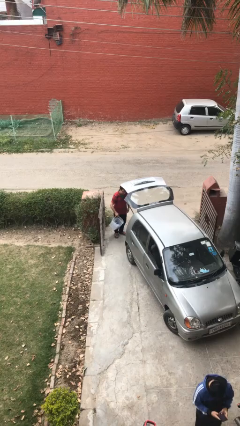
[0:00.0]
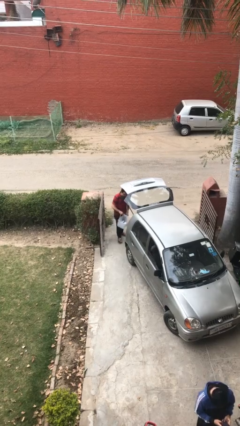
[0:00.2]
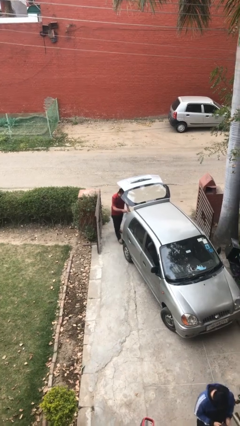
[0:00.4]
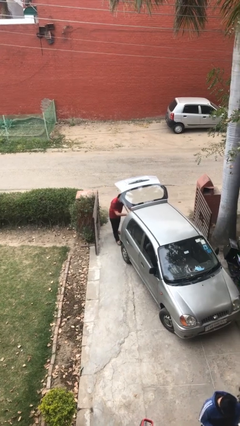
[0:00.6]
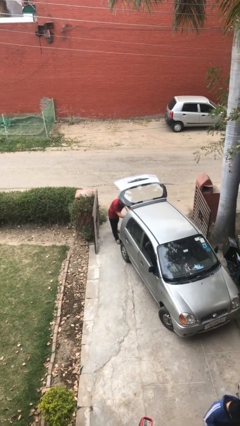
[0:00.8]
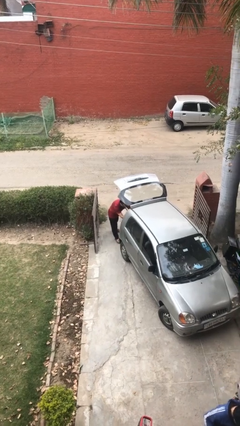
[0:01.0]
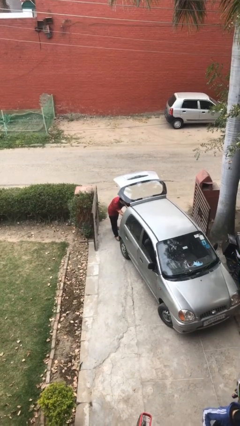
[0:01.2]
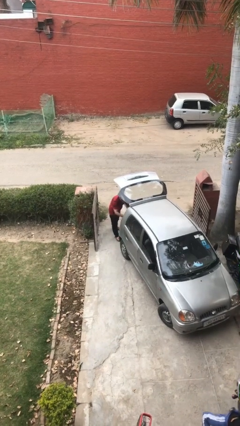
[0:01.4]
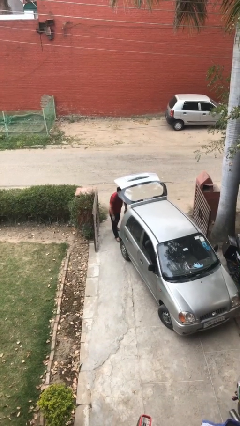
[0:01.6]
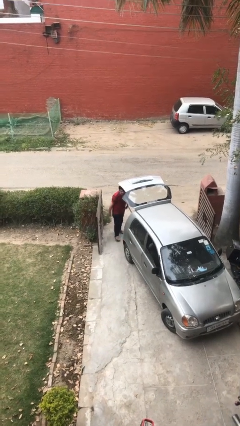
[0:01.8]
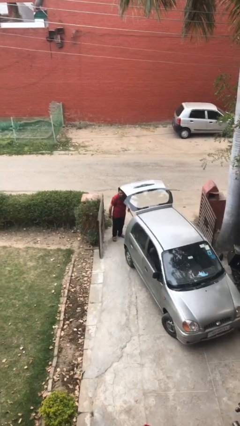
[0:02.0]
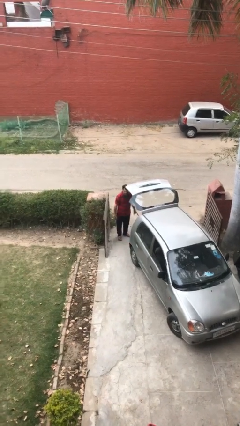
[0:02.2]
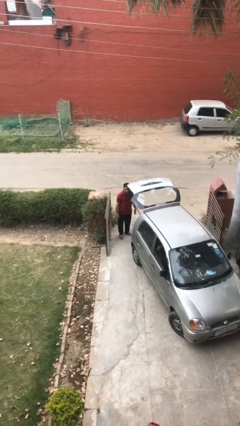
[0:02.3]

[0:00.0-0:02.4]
person loads car

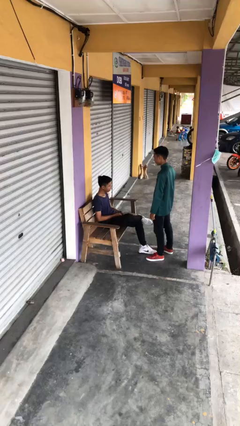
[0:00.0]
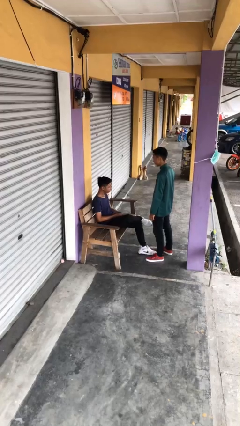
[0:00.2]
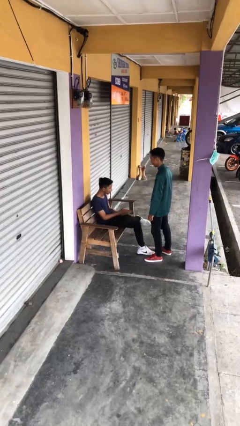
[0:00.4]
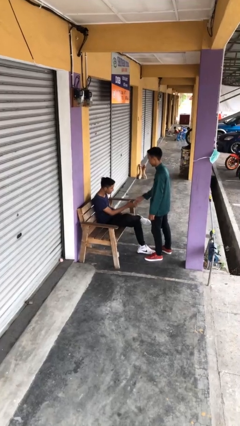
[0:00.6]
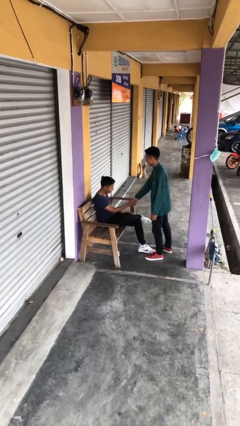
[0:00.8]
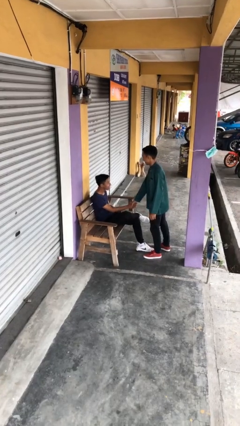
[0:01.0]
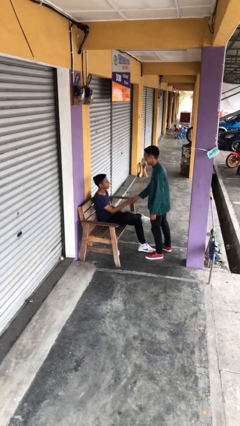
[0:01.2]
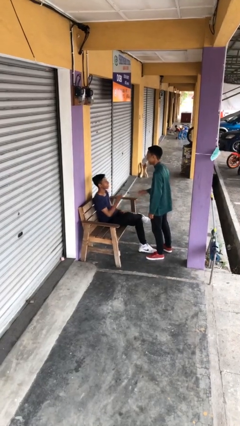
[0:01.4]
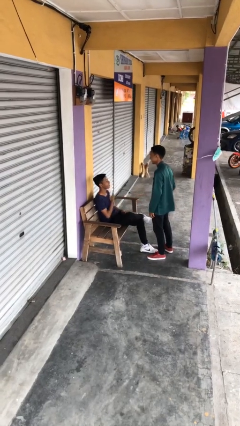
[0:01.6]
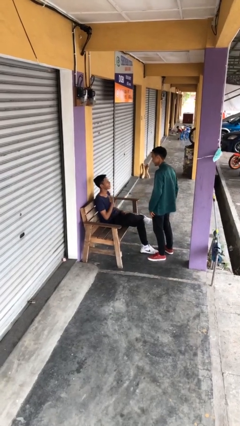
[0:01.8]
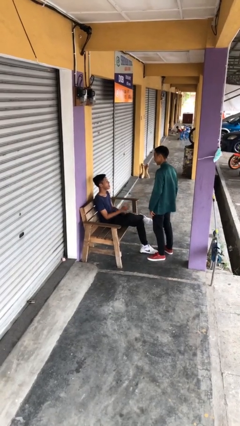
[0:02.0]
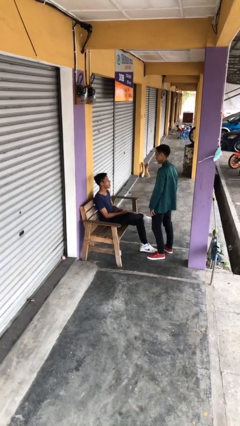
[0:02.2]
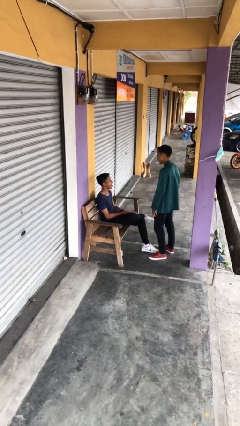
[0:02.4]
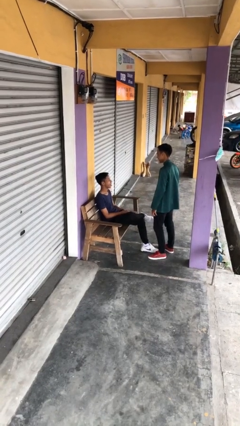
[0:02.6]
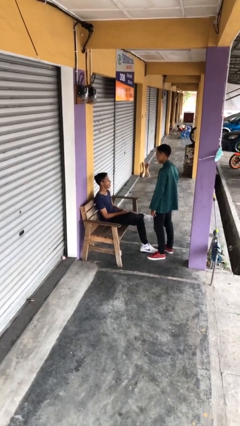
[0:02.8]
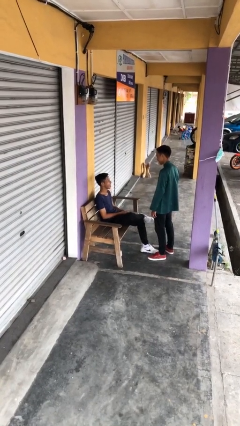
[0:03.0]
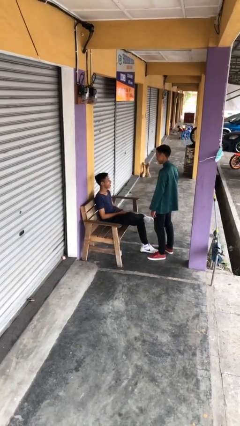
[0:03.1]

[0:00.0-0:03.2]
person shakes hand

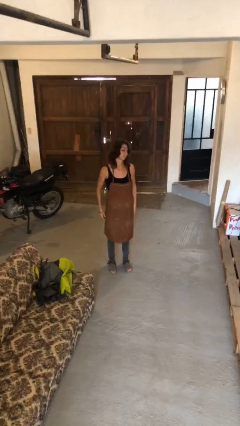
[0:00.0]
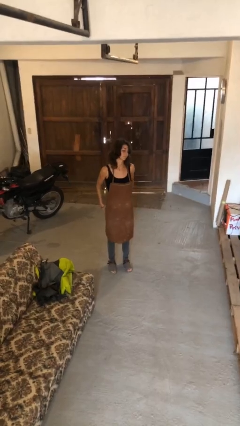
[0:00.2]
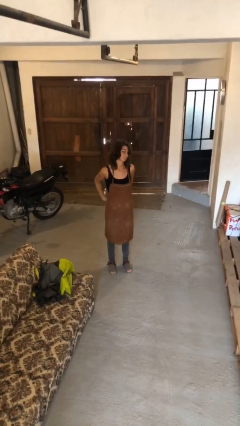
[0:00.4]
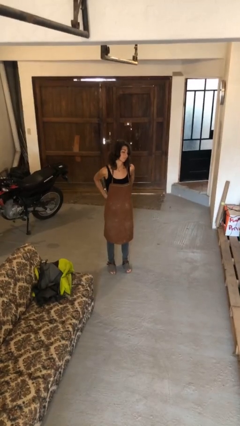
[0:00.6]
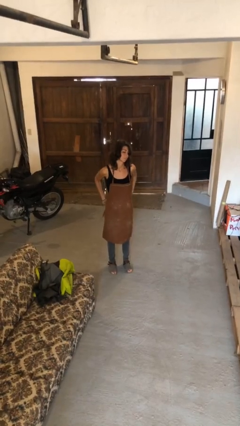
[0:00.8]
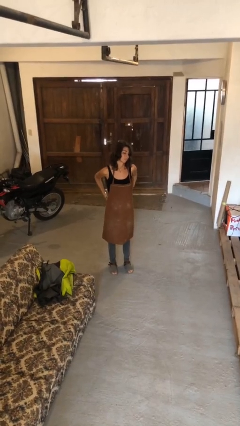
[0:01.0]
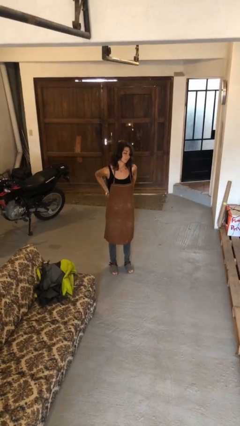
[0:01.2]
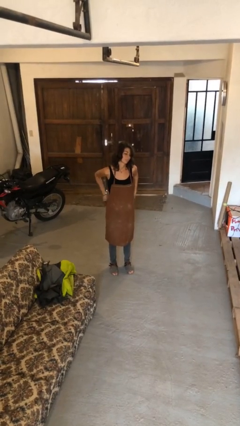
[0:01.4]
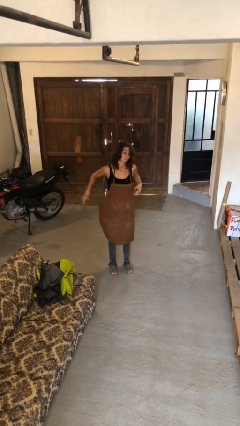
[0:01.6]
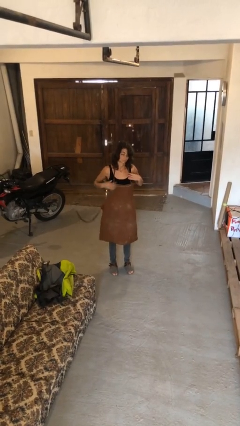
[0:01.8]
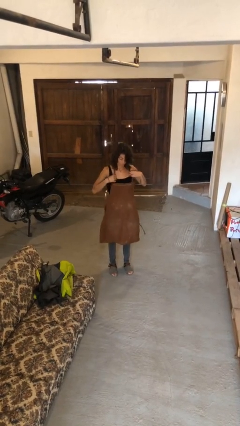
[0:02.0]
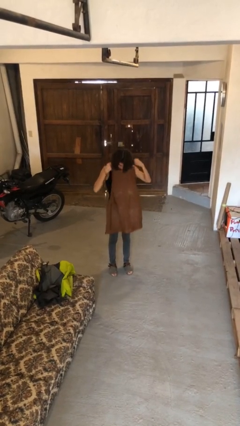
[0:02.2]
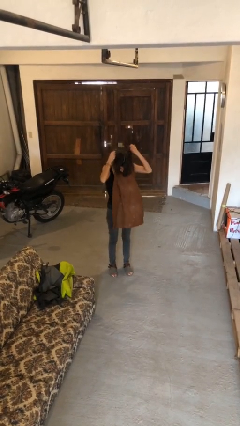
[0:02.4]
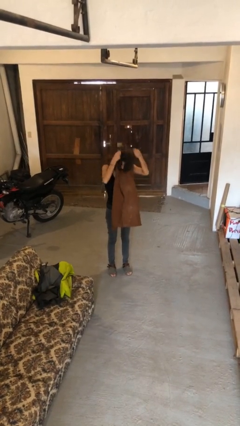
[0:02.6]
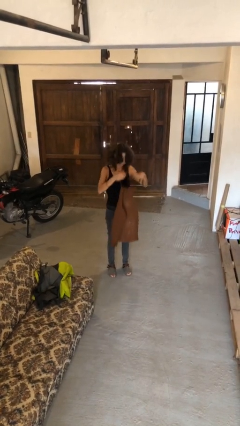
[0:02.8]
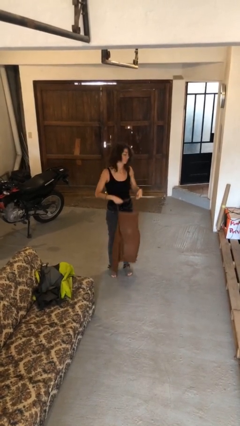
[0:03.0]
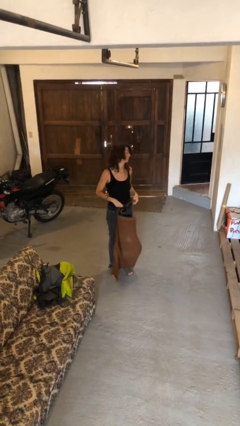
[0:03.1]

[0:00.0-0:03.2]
person takes off apron

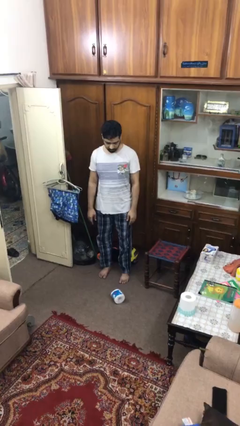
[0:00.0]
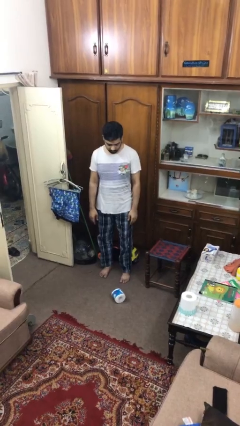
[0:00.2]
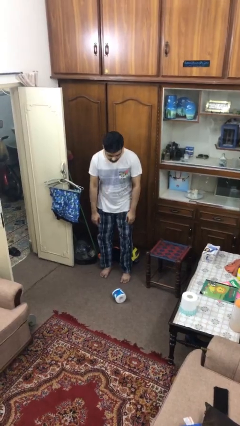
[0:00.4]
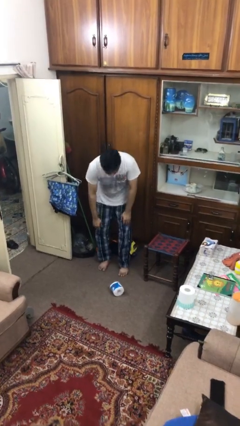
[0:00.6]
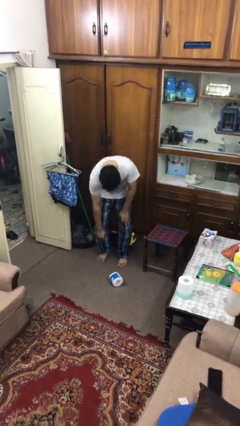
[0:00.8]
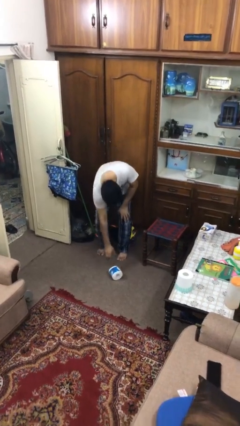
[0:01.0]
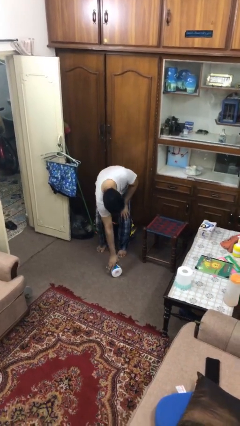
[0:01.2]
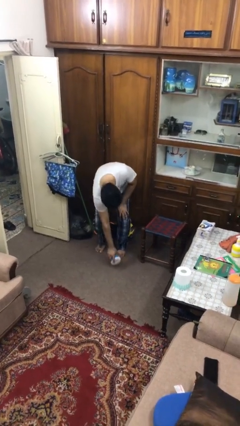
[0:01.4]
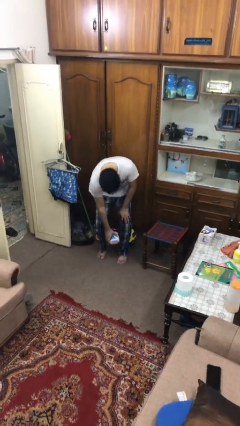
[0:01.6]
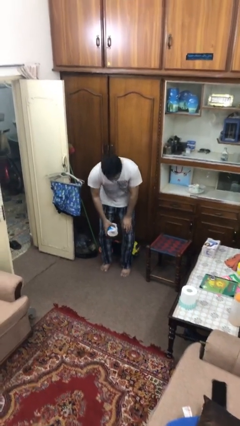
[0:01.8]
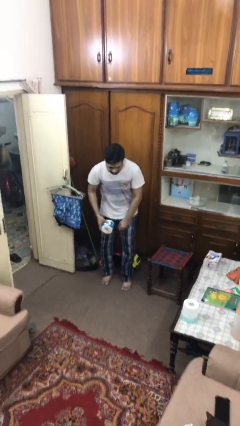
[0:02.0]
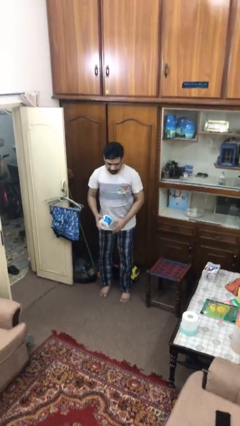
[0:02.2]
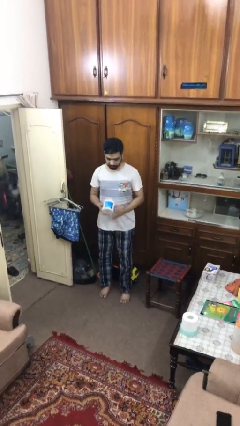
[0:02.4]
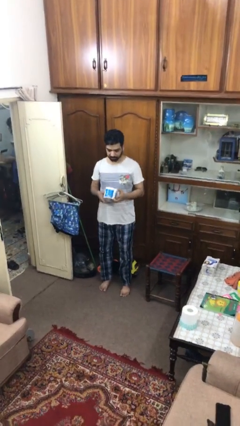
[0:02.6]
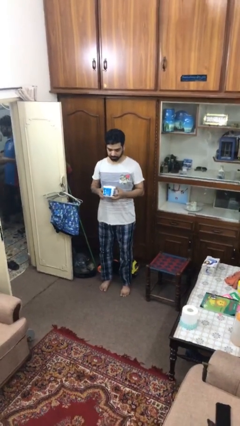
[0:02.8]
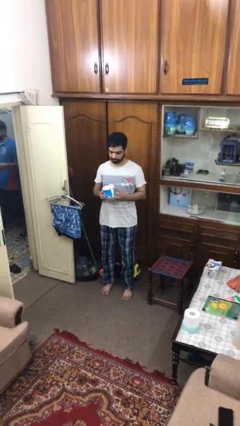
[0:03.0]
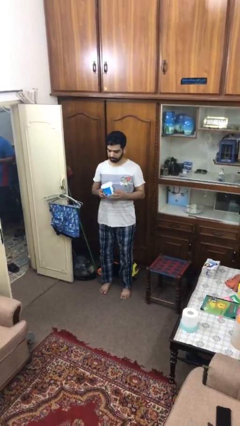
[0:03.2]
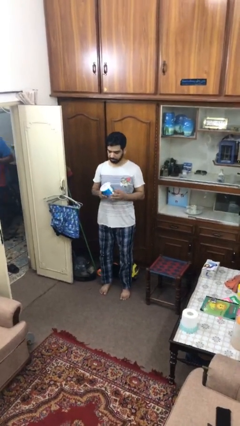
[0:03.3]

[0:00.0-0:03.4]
person picks up object from floor

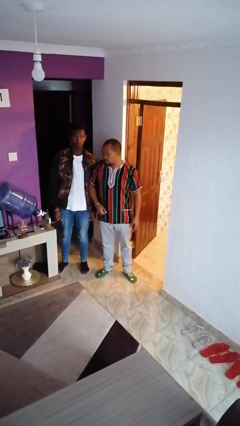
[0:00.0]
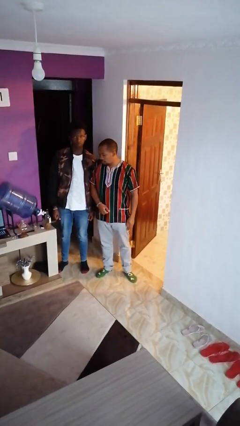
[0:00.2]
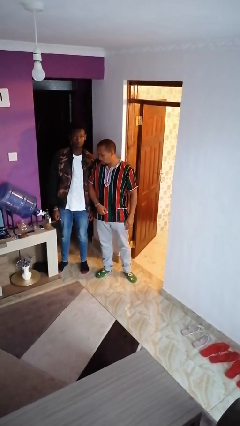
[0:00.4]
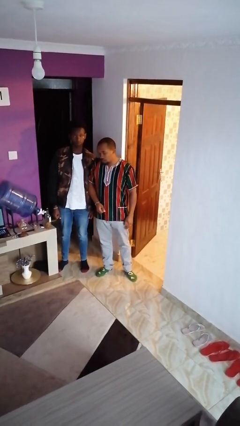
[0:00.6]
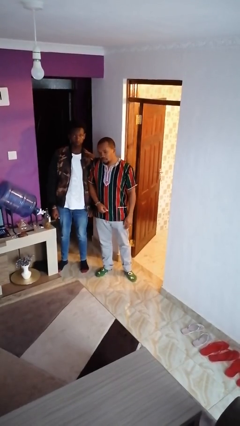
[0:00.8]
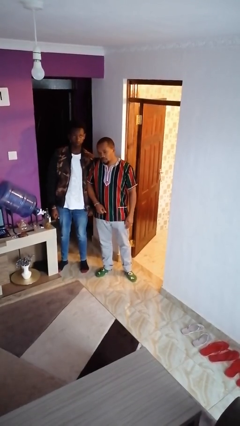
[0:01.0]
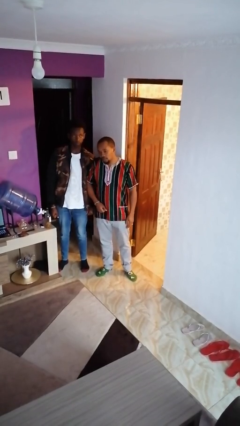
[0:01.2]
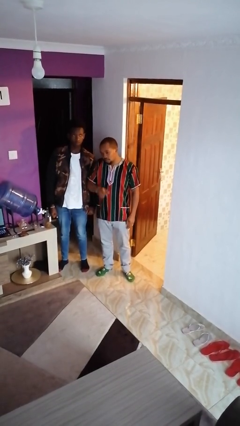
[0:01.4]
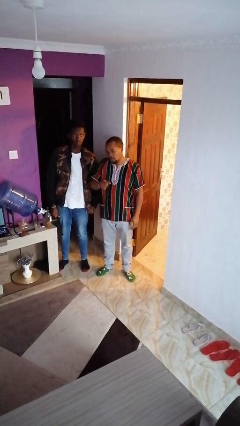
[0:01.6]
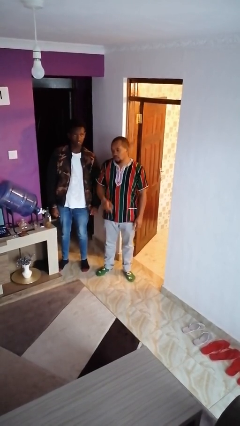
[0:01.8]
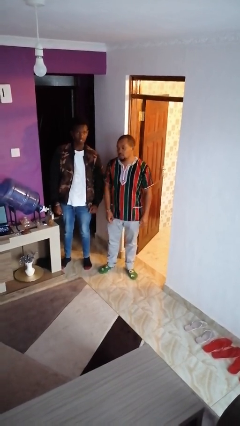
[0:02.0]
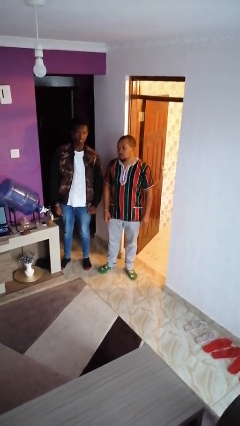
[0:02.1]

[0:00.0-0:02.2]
person nudges person with elbow

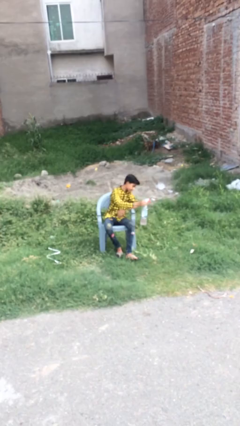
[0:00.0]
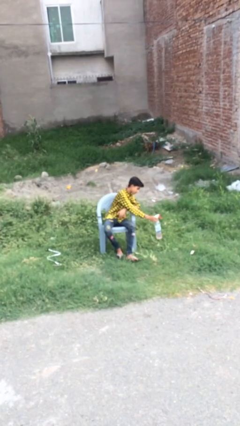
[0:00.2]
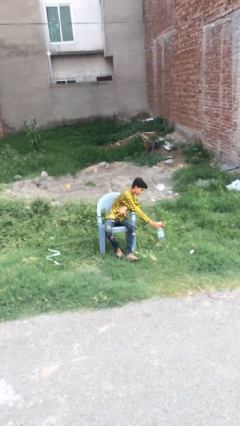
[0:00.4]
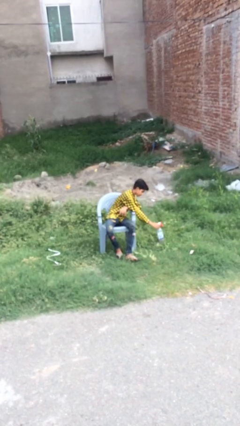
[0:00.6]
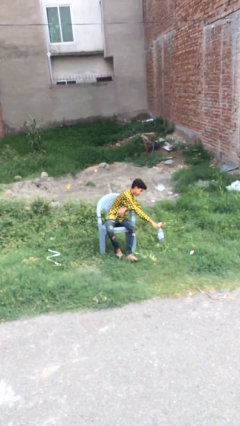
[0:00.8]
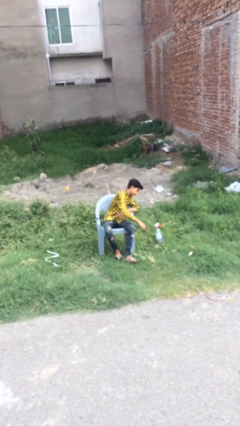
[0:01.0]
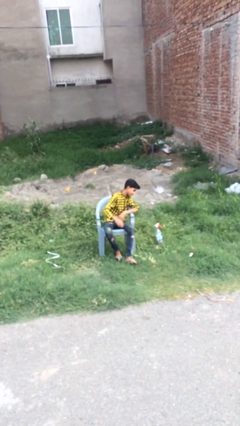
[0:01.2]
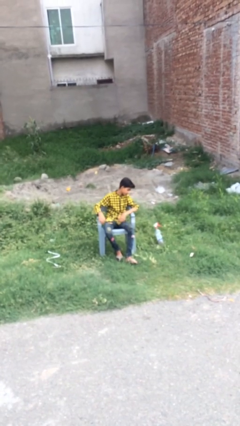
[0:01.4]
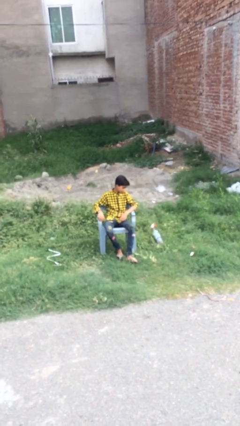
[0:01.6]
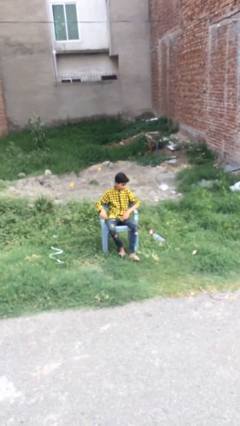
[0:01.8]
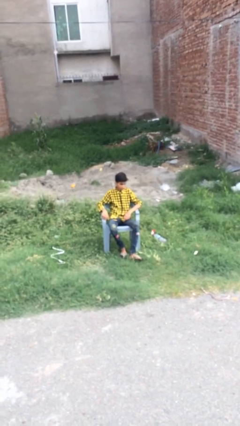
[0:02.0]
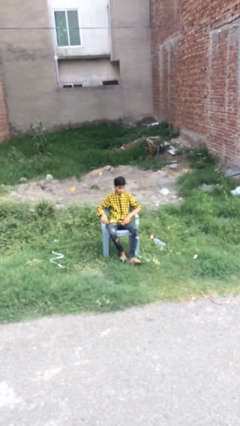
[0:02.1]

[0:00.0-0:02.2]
person puts down object on floor

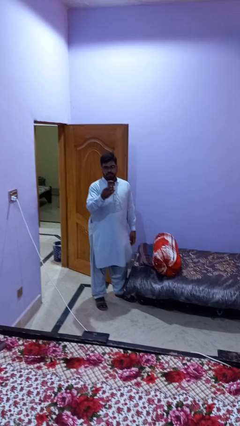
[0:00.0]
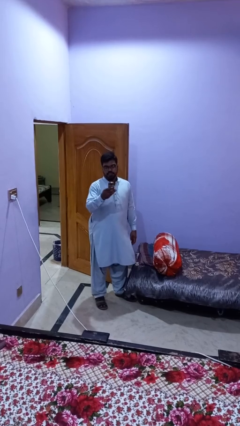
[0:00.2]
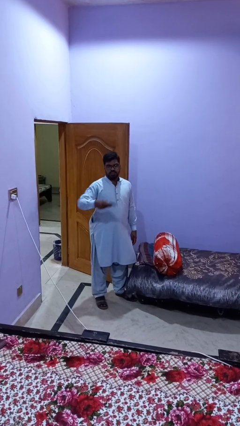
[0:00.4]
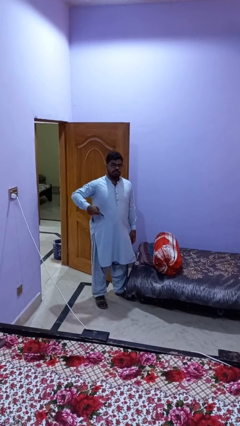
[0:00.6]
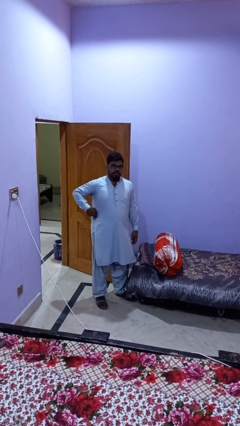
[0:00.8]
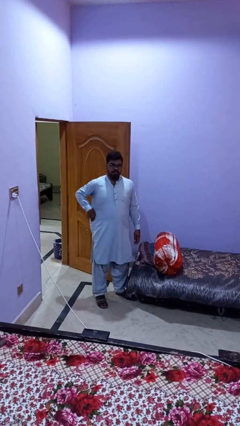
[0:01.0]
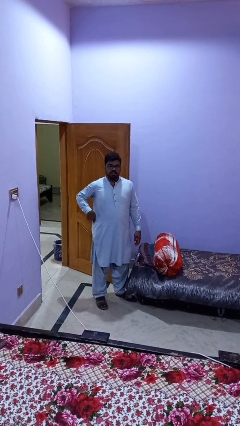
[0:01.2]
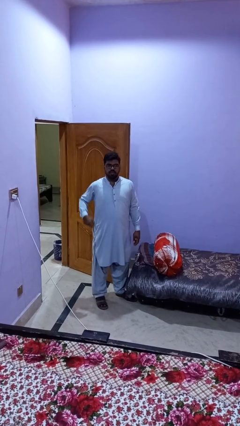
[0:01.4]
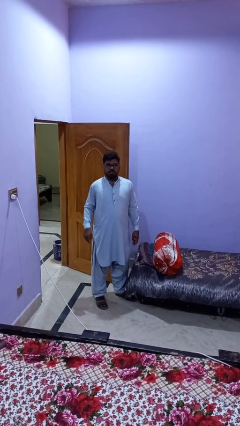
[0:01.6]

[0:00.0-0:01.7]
person puts phone into pocket
